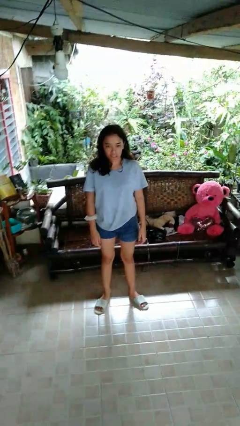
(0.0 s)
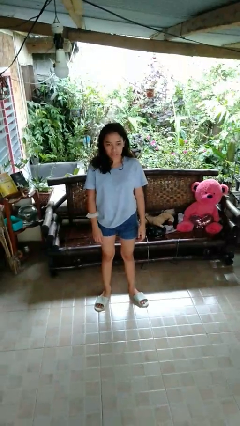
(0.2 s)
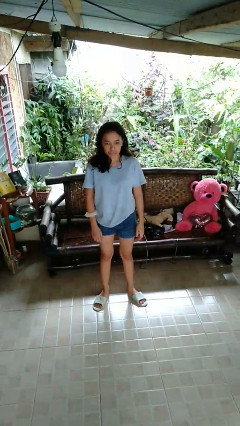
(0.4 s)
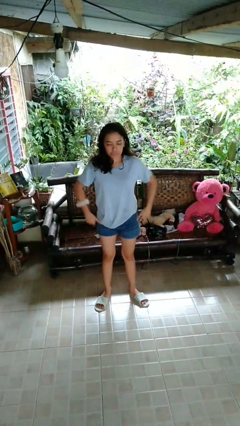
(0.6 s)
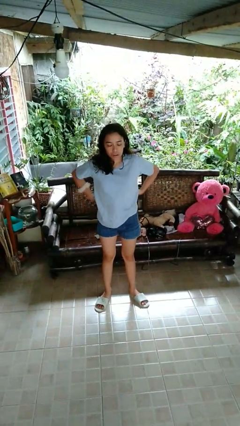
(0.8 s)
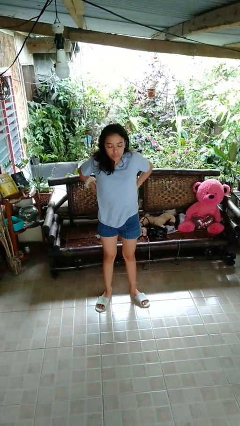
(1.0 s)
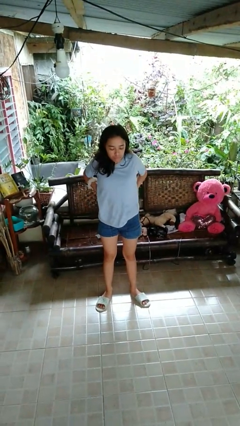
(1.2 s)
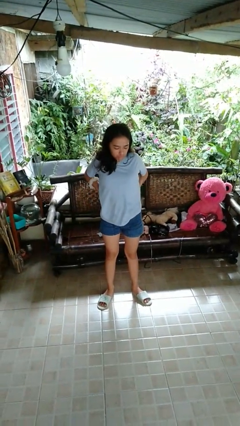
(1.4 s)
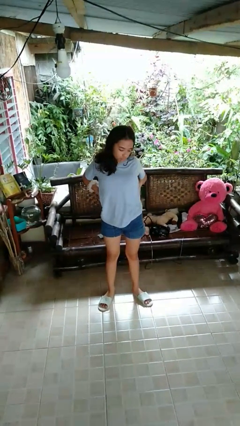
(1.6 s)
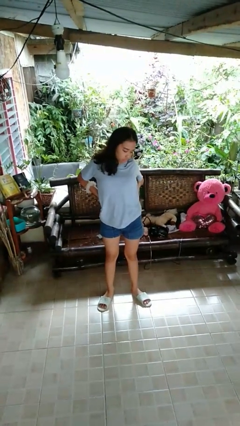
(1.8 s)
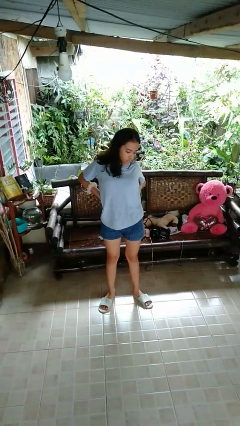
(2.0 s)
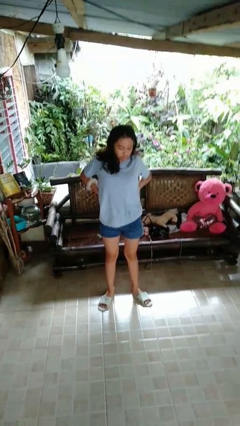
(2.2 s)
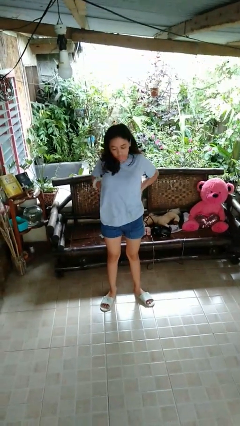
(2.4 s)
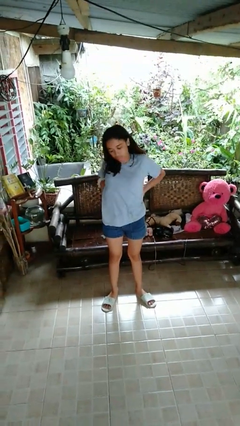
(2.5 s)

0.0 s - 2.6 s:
person stretches back

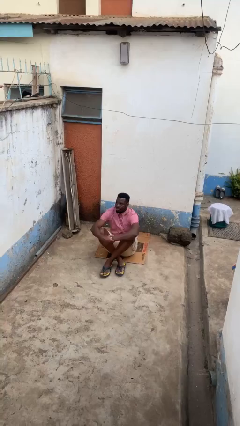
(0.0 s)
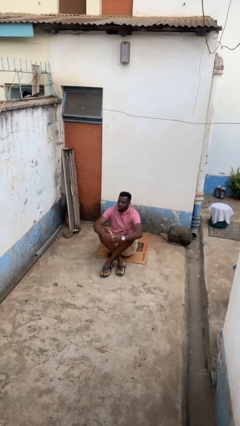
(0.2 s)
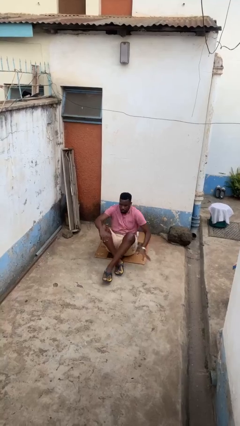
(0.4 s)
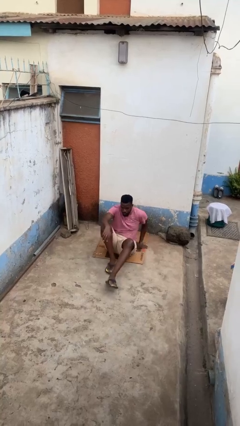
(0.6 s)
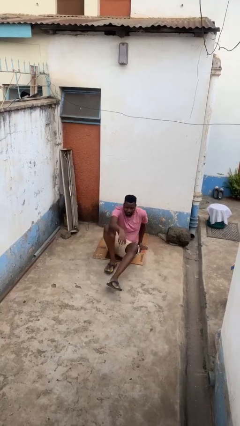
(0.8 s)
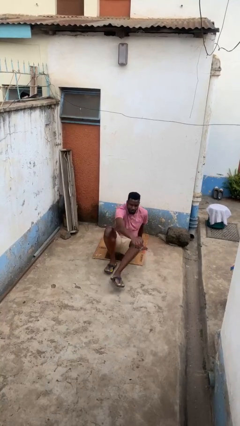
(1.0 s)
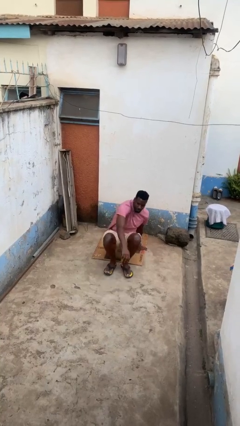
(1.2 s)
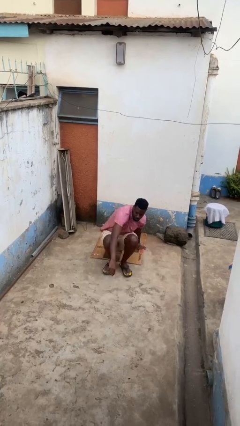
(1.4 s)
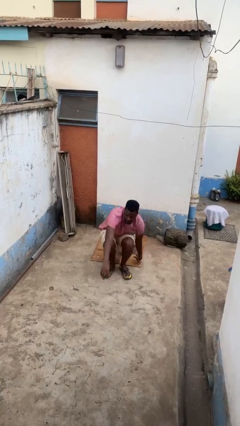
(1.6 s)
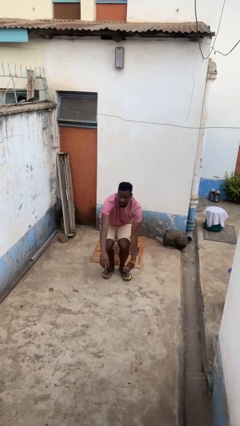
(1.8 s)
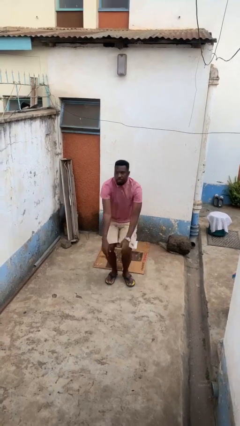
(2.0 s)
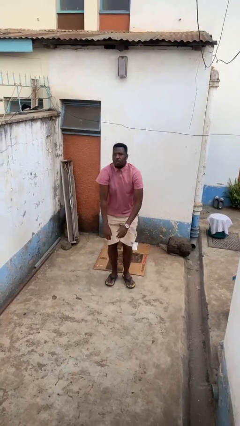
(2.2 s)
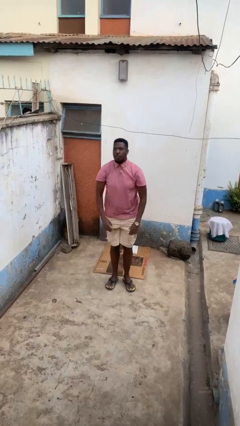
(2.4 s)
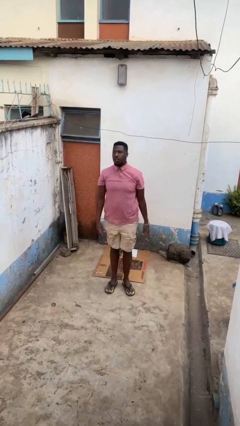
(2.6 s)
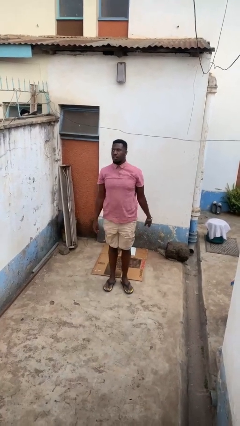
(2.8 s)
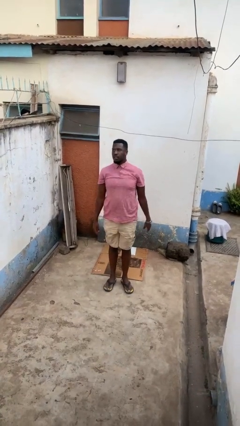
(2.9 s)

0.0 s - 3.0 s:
person stands up from floor

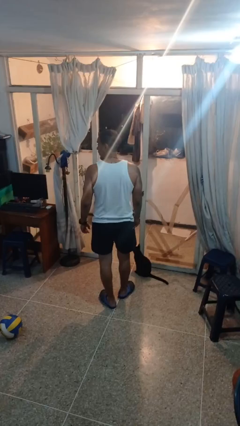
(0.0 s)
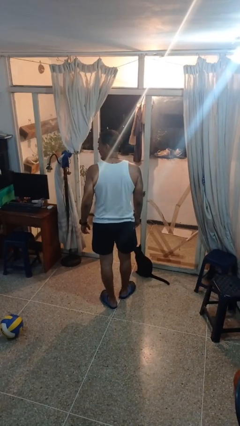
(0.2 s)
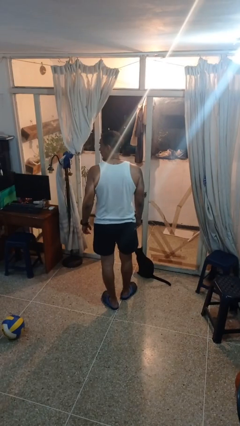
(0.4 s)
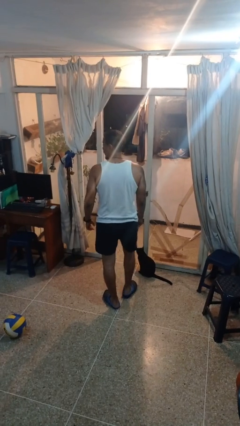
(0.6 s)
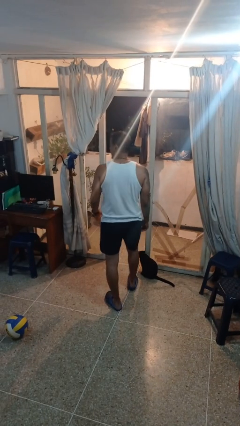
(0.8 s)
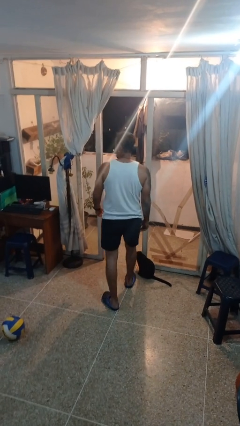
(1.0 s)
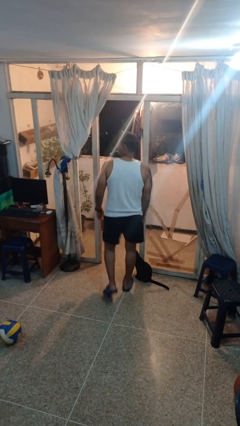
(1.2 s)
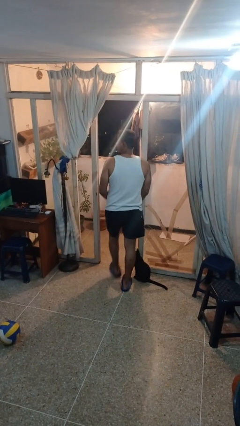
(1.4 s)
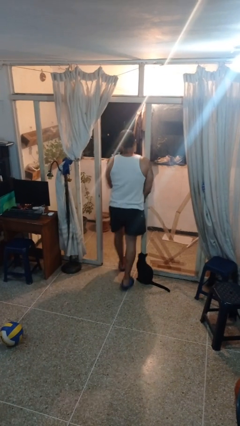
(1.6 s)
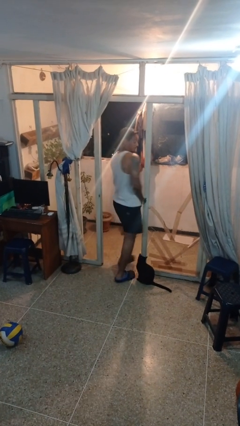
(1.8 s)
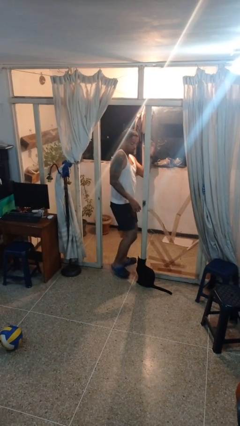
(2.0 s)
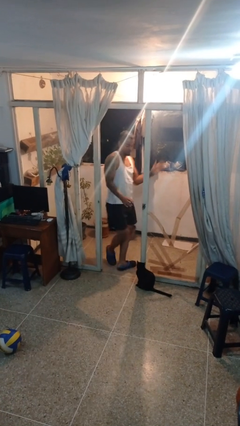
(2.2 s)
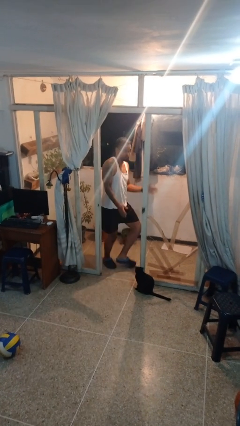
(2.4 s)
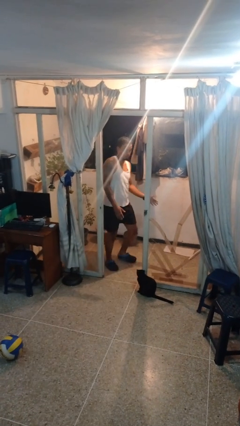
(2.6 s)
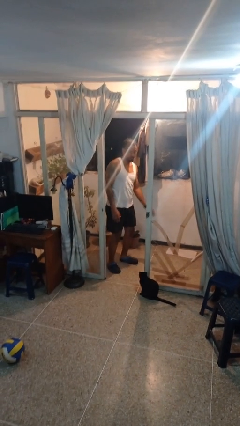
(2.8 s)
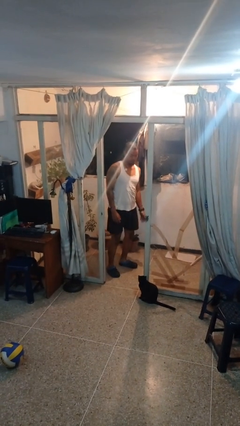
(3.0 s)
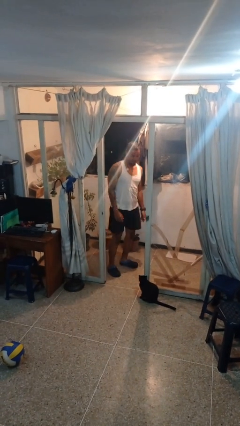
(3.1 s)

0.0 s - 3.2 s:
person bumps into wall

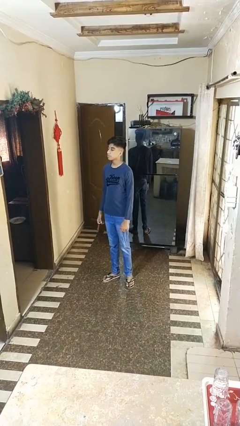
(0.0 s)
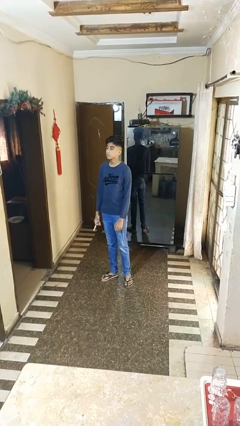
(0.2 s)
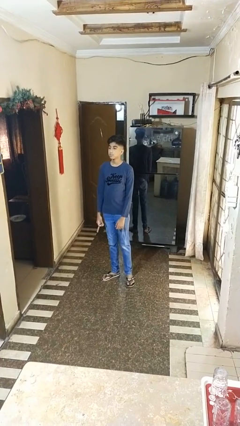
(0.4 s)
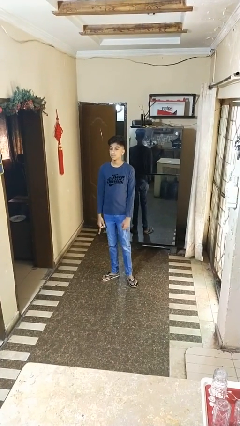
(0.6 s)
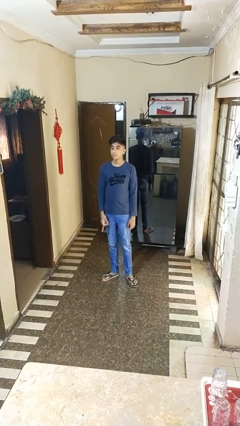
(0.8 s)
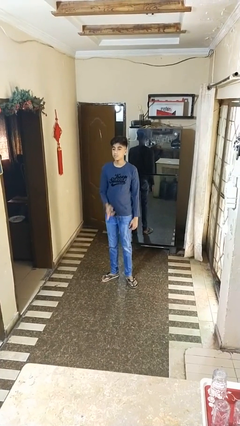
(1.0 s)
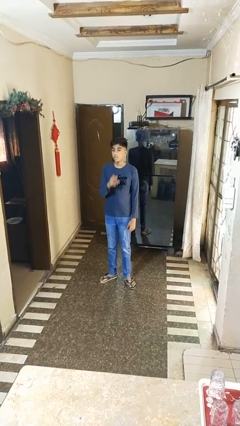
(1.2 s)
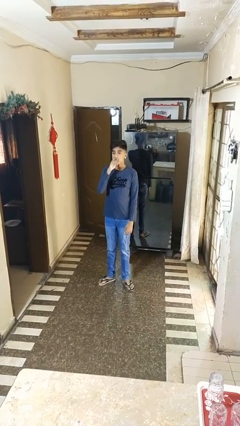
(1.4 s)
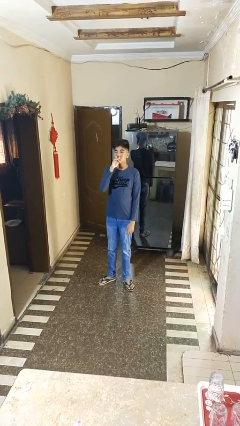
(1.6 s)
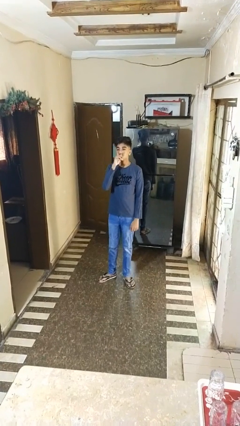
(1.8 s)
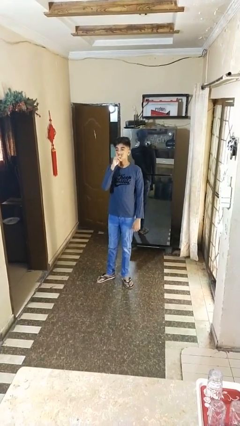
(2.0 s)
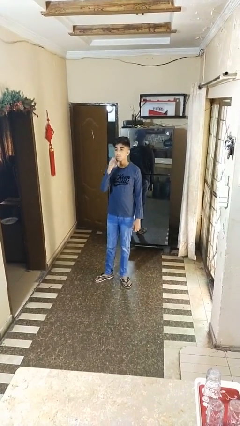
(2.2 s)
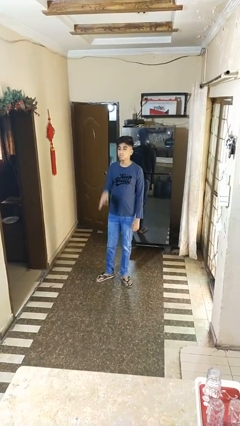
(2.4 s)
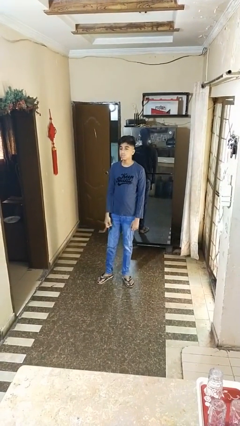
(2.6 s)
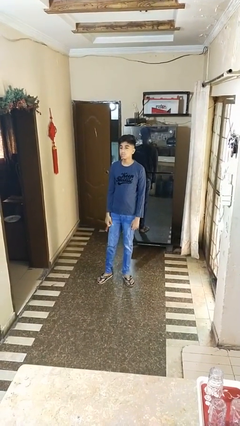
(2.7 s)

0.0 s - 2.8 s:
person vapes

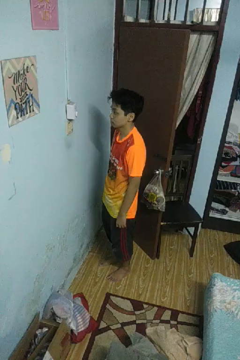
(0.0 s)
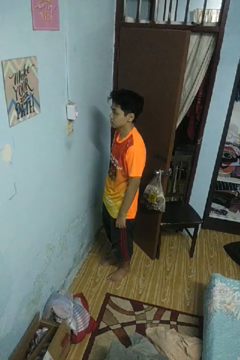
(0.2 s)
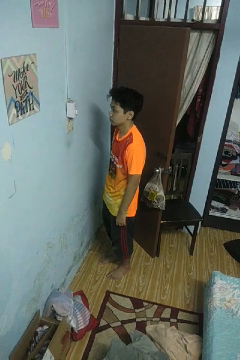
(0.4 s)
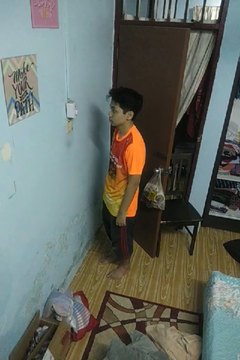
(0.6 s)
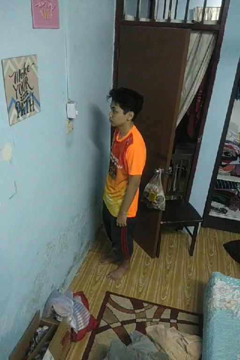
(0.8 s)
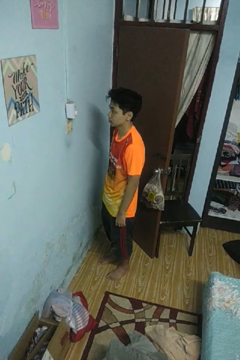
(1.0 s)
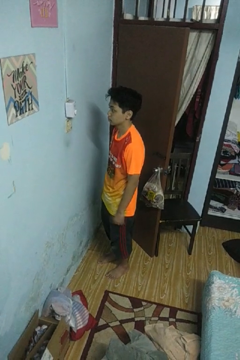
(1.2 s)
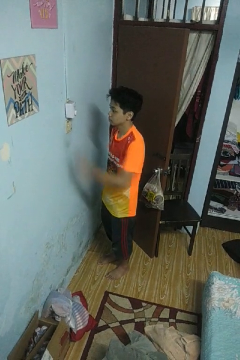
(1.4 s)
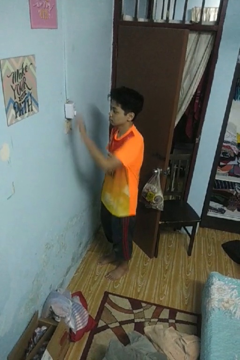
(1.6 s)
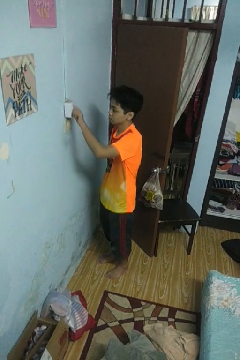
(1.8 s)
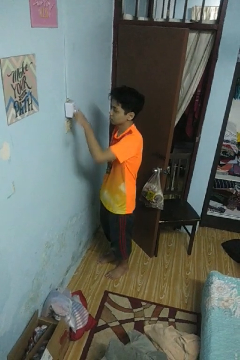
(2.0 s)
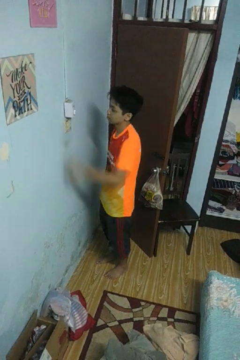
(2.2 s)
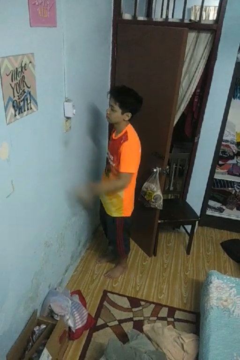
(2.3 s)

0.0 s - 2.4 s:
person adjusts thermostat

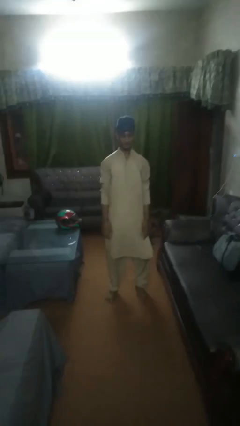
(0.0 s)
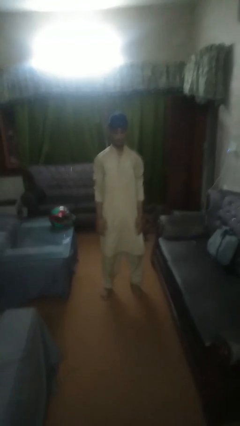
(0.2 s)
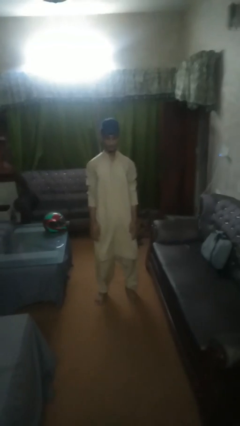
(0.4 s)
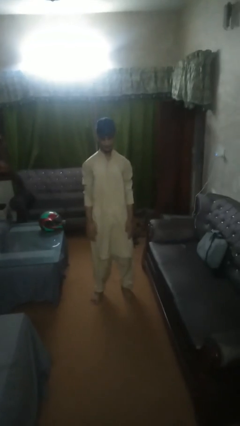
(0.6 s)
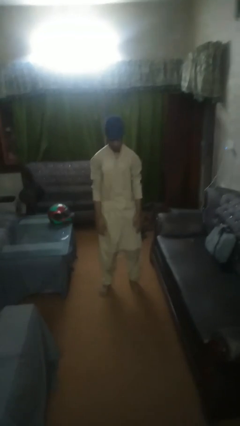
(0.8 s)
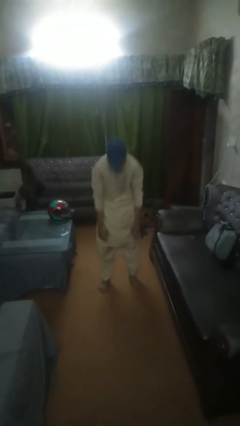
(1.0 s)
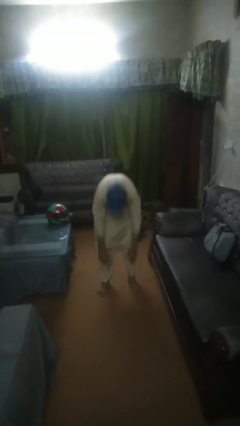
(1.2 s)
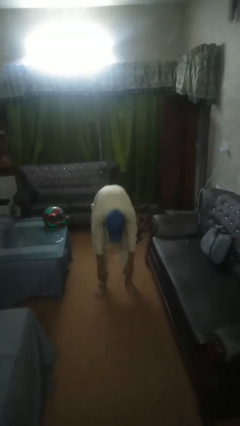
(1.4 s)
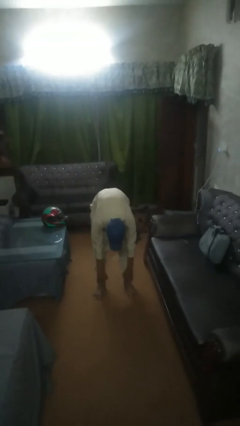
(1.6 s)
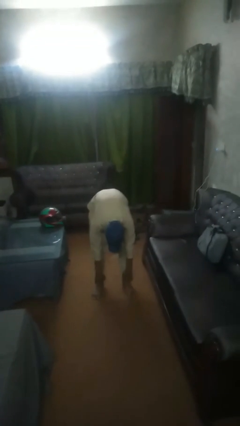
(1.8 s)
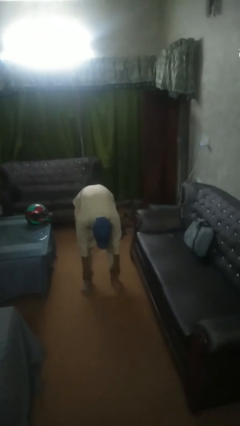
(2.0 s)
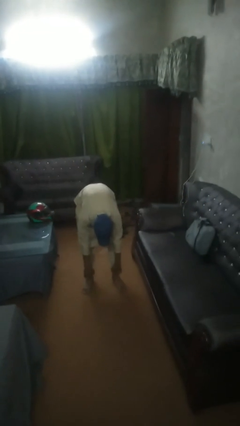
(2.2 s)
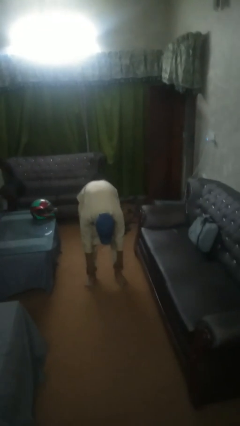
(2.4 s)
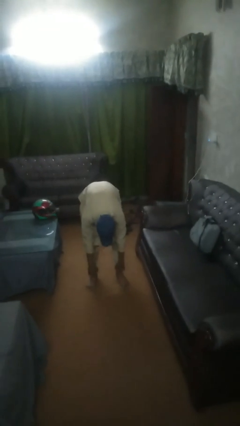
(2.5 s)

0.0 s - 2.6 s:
person exercises with plank

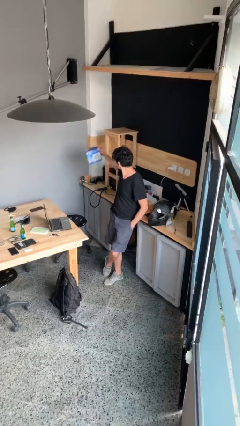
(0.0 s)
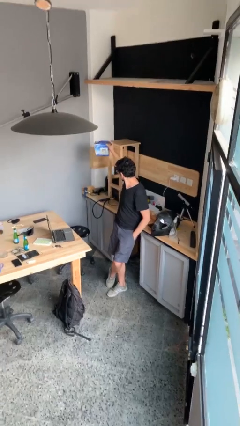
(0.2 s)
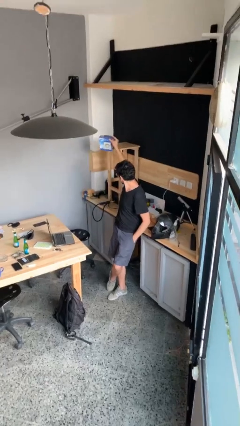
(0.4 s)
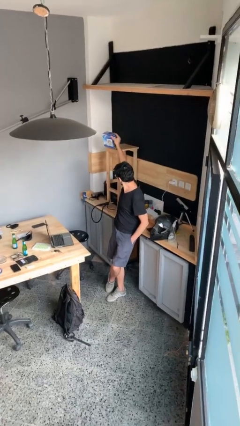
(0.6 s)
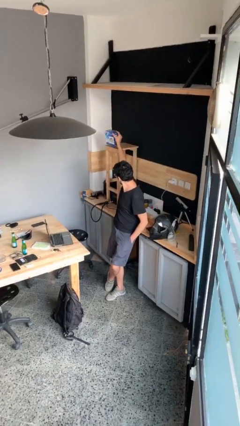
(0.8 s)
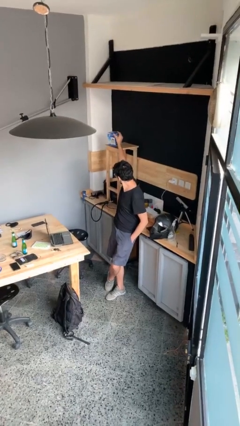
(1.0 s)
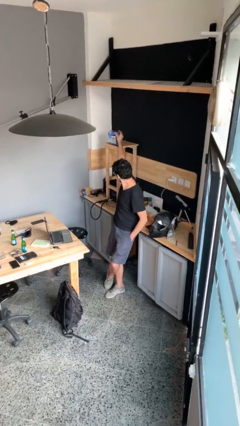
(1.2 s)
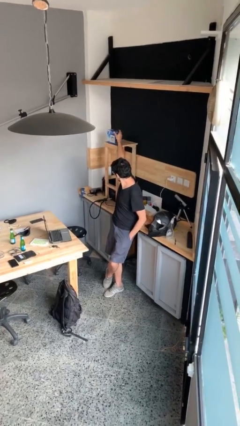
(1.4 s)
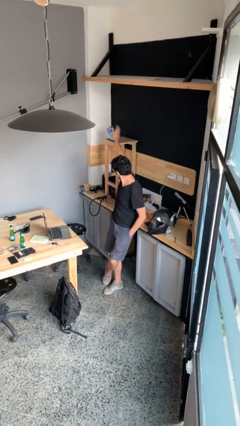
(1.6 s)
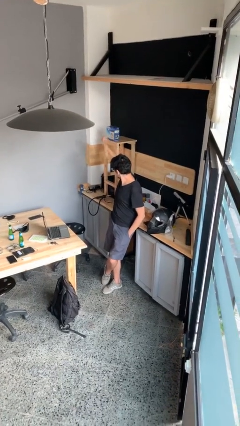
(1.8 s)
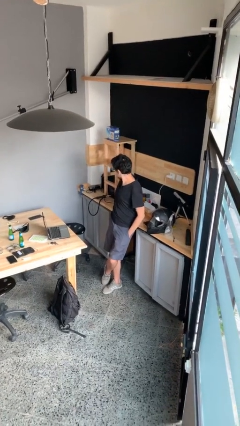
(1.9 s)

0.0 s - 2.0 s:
person puts down object on shelf
